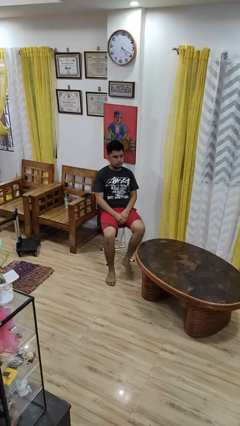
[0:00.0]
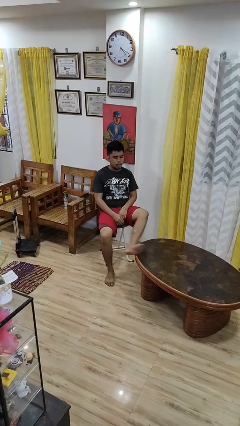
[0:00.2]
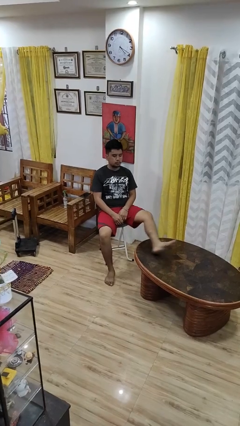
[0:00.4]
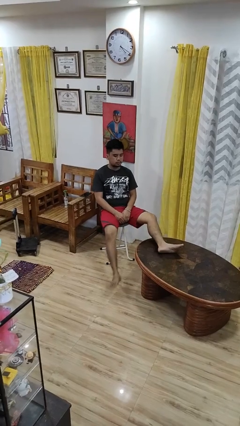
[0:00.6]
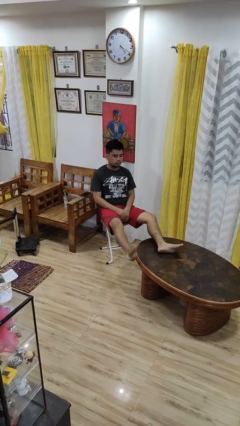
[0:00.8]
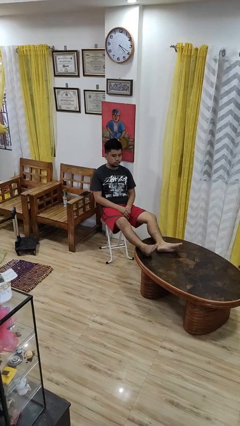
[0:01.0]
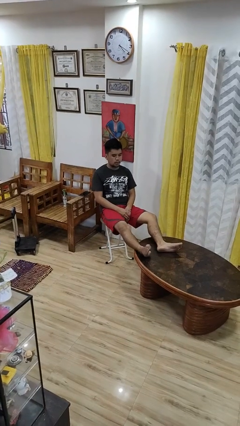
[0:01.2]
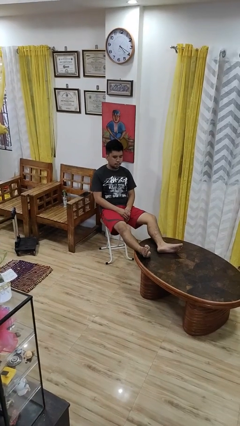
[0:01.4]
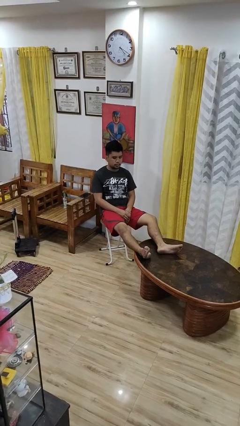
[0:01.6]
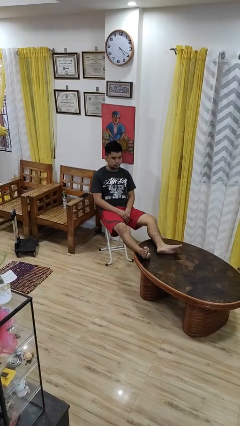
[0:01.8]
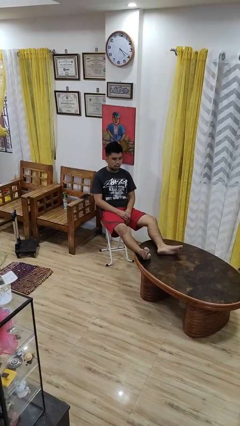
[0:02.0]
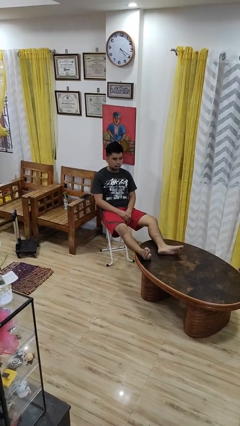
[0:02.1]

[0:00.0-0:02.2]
person puts feet up

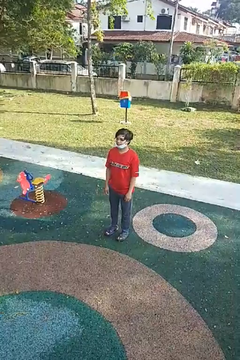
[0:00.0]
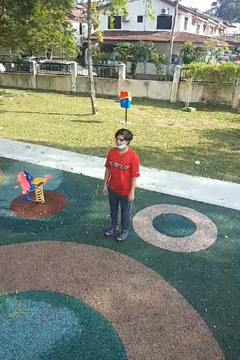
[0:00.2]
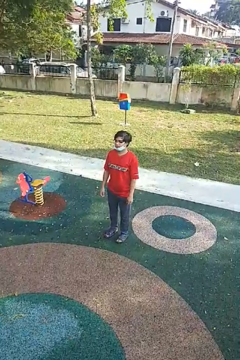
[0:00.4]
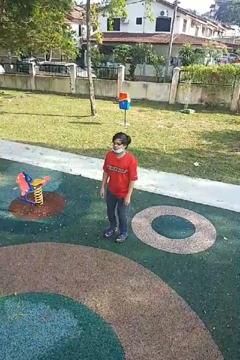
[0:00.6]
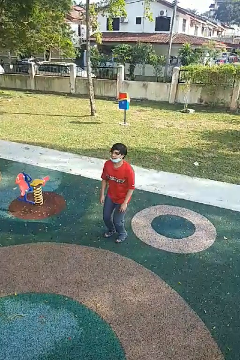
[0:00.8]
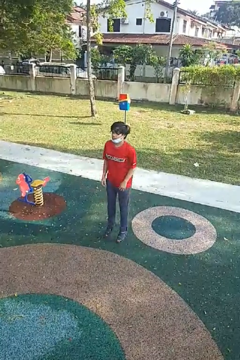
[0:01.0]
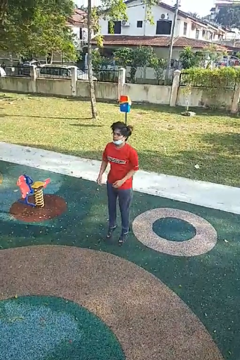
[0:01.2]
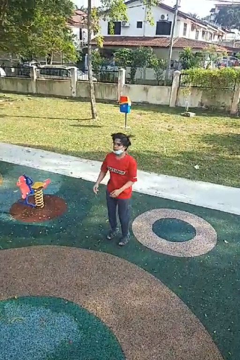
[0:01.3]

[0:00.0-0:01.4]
person jumps

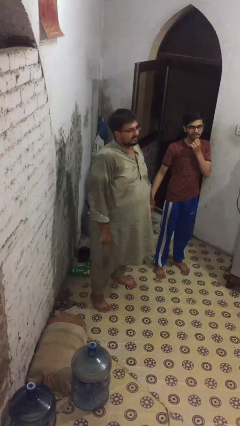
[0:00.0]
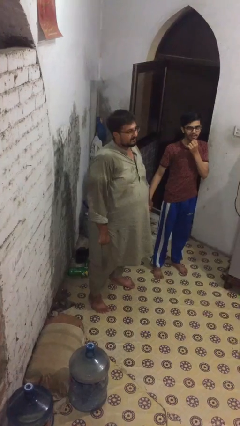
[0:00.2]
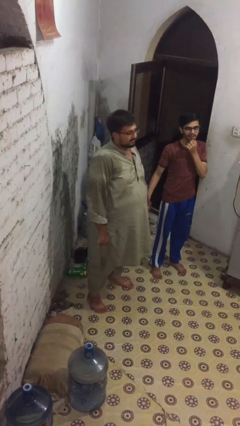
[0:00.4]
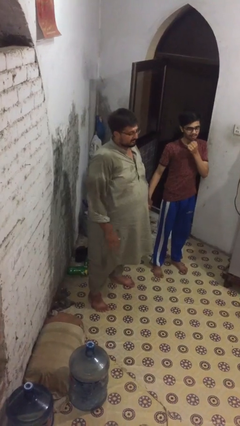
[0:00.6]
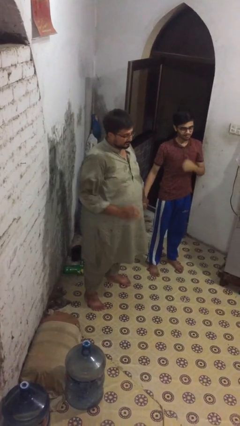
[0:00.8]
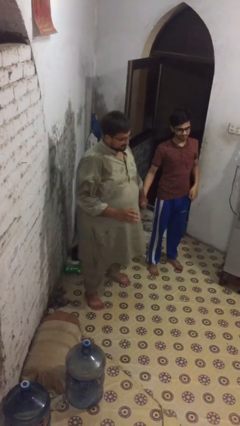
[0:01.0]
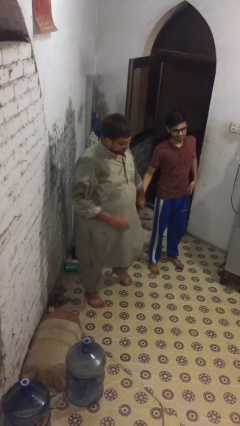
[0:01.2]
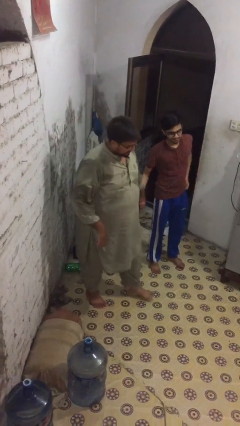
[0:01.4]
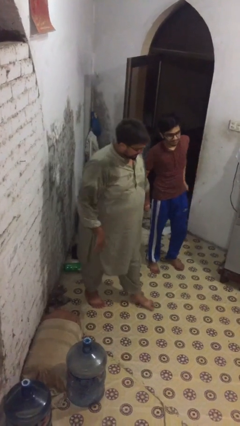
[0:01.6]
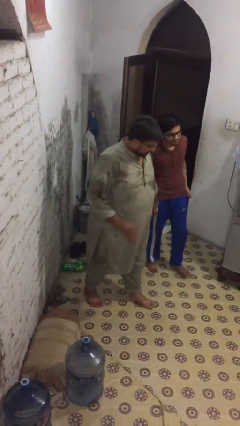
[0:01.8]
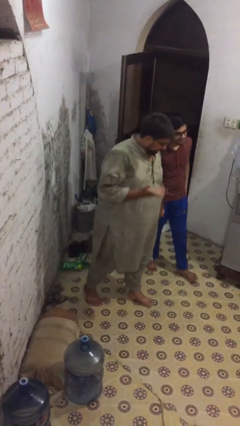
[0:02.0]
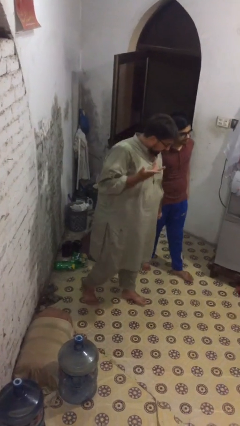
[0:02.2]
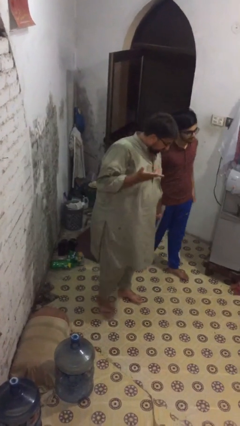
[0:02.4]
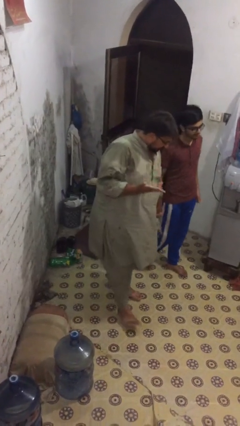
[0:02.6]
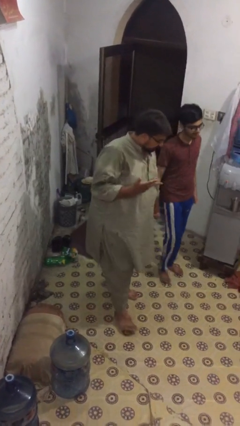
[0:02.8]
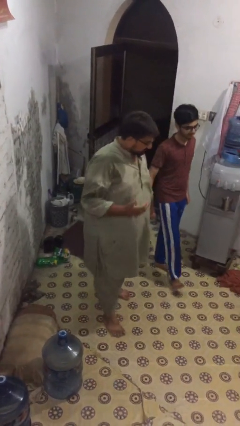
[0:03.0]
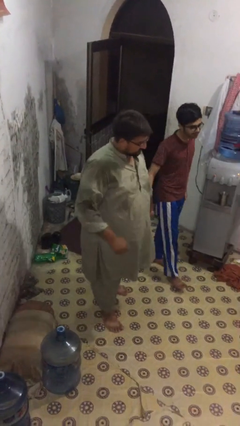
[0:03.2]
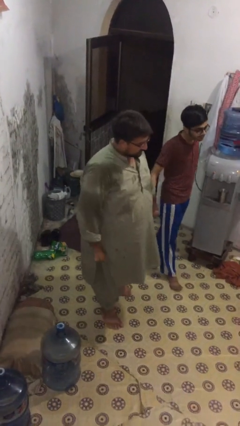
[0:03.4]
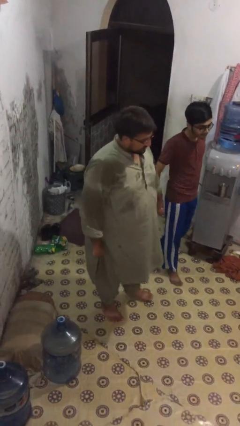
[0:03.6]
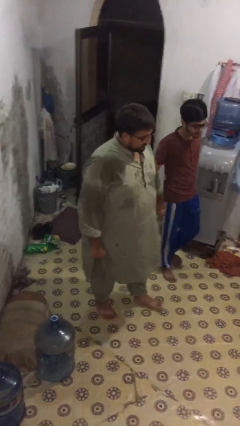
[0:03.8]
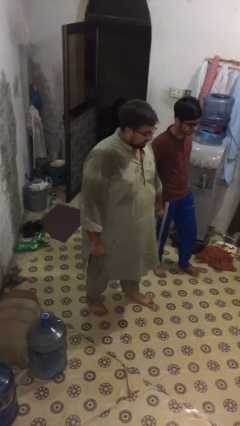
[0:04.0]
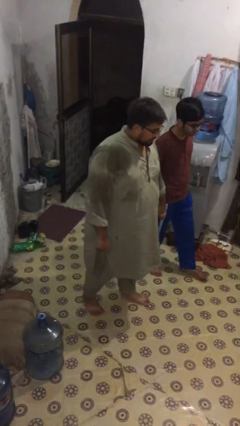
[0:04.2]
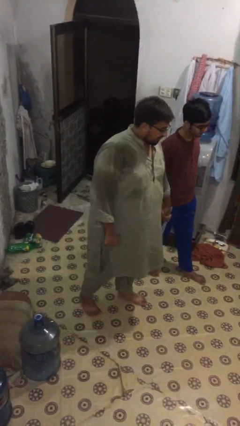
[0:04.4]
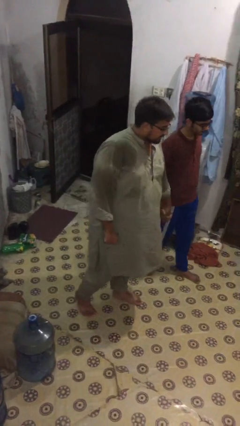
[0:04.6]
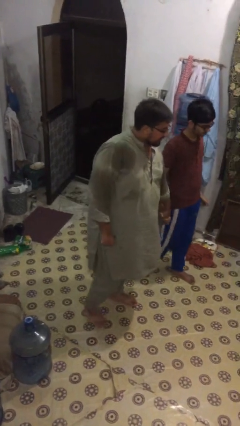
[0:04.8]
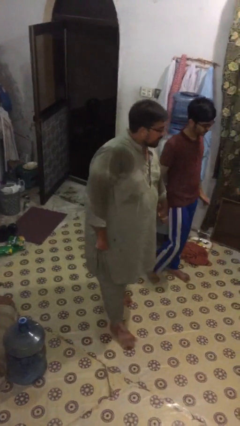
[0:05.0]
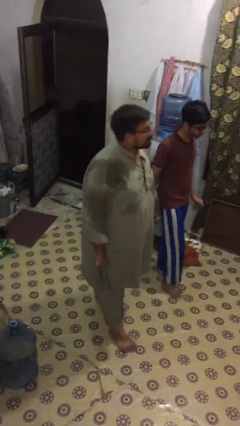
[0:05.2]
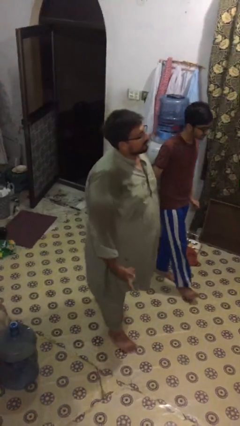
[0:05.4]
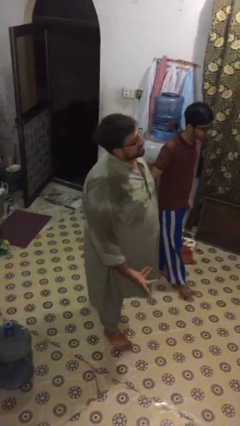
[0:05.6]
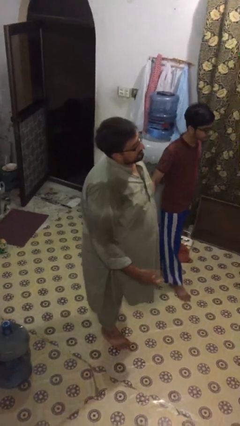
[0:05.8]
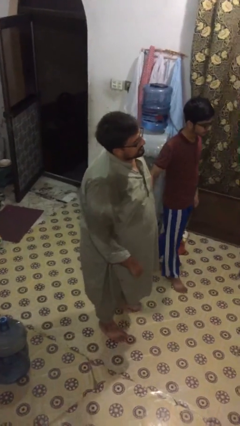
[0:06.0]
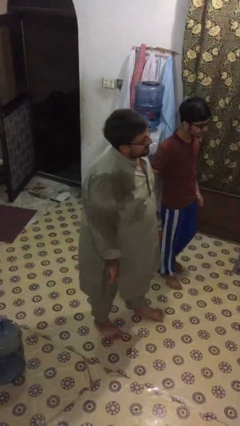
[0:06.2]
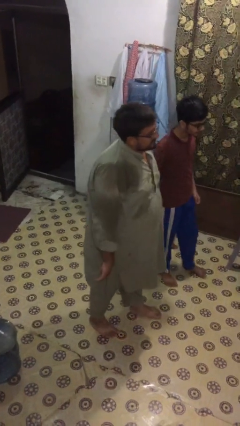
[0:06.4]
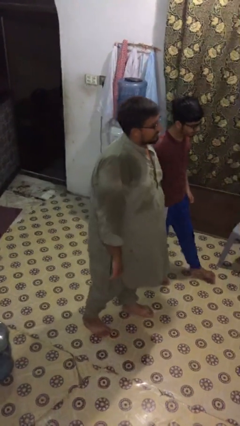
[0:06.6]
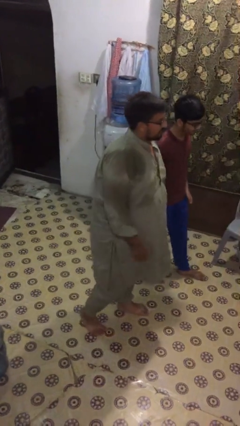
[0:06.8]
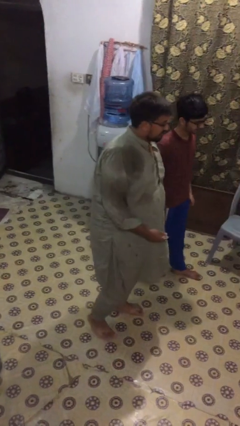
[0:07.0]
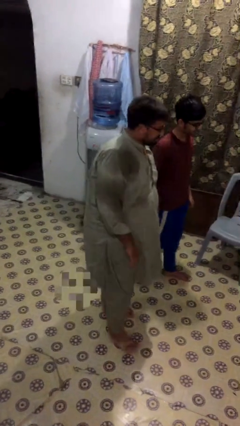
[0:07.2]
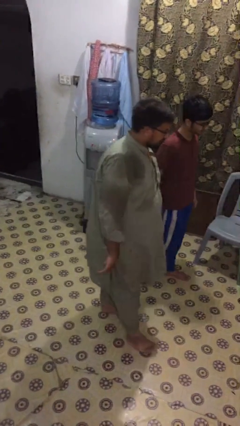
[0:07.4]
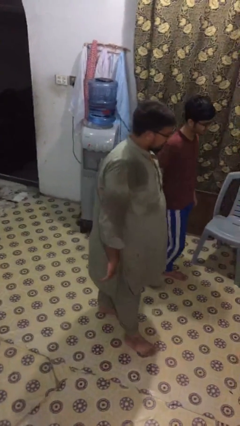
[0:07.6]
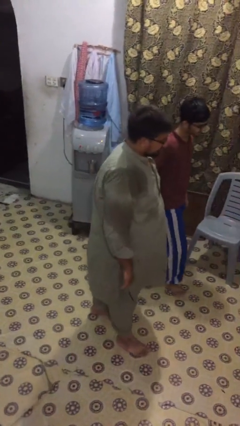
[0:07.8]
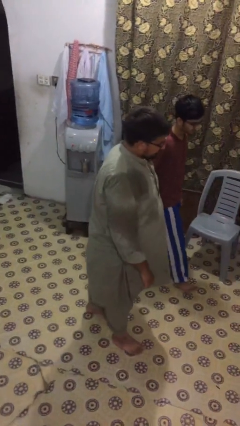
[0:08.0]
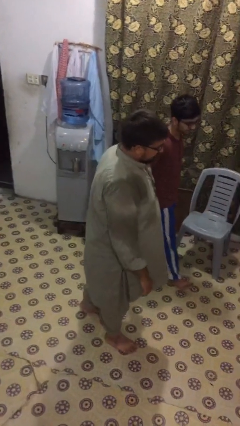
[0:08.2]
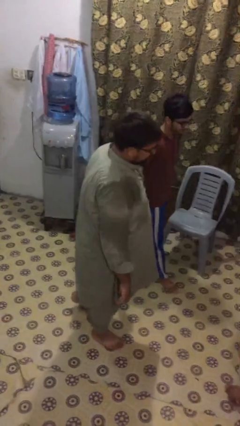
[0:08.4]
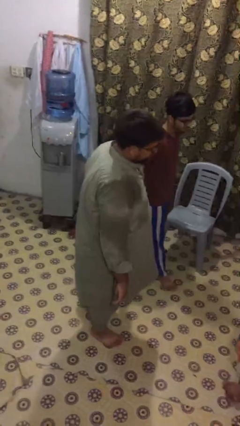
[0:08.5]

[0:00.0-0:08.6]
person holds hand

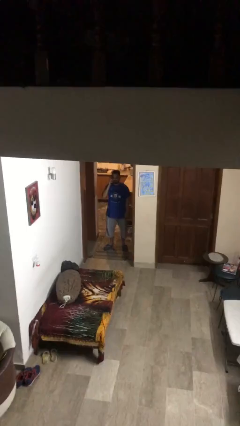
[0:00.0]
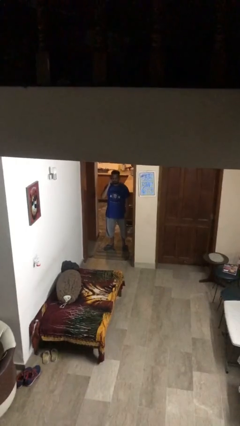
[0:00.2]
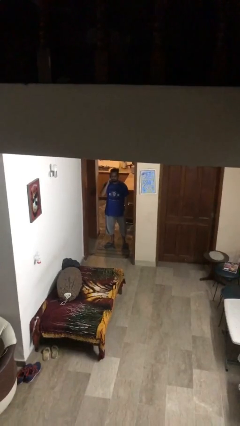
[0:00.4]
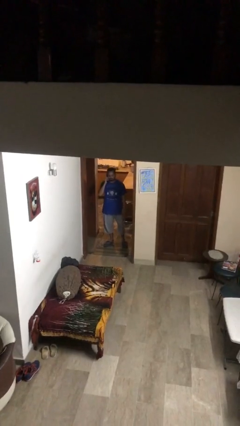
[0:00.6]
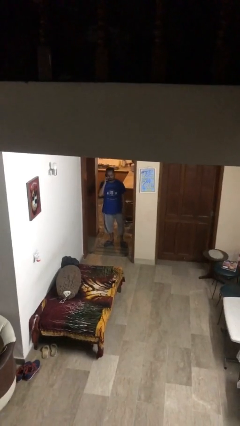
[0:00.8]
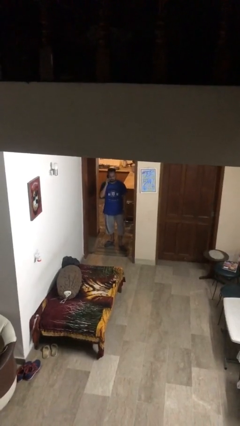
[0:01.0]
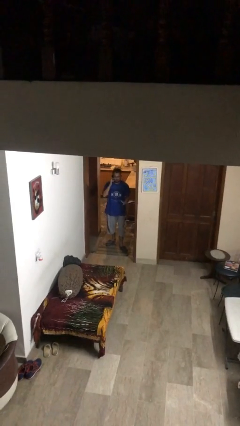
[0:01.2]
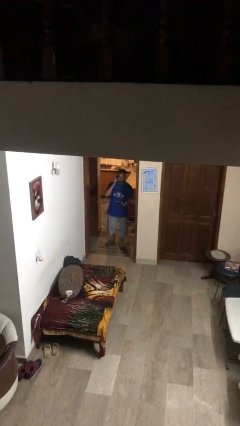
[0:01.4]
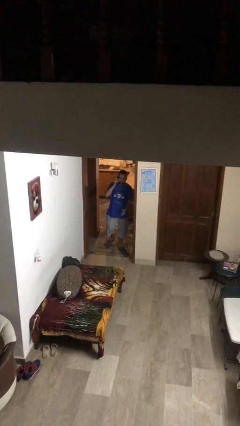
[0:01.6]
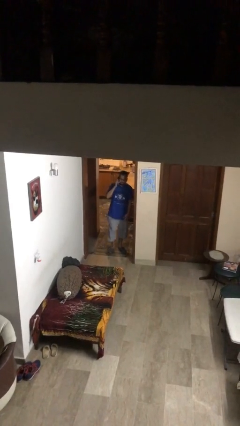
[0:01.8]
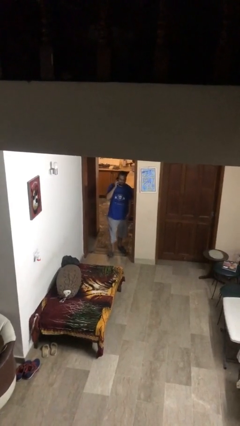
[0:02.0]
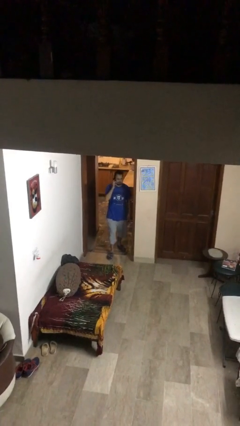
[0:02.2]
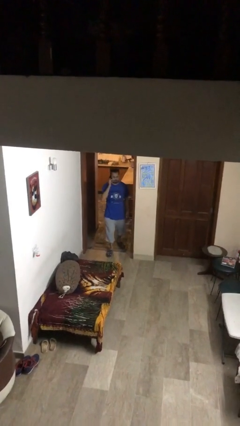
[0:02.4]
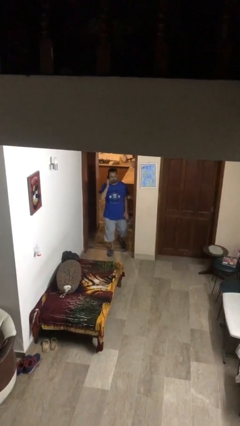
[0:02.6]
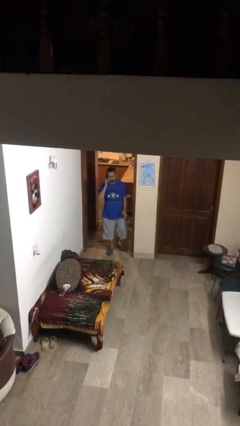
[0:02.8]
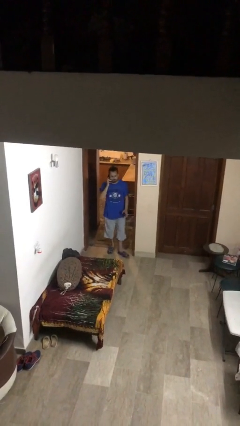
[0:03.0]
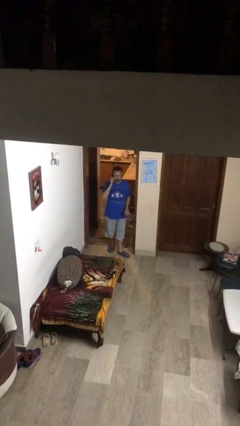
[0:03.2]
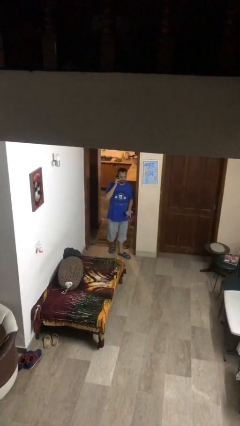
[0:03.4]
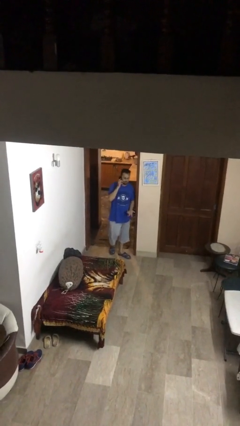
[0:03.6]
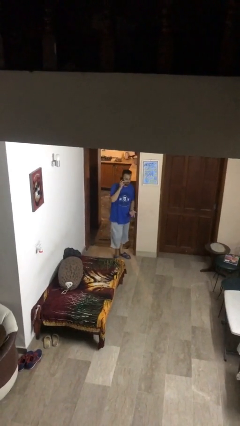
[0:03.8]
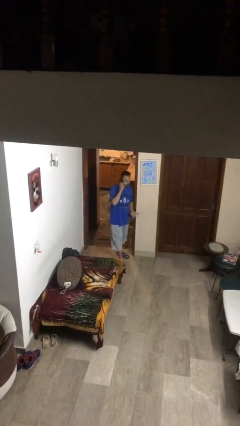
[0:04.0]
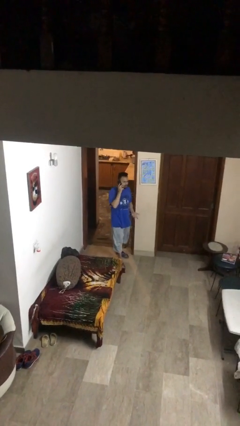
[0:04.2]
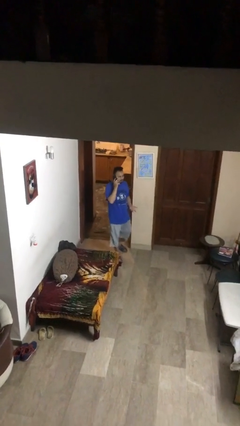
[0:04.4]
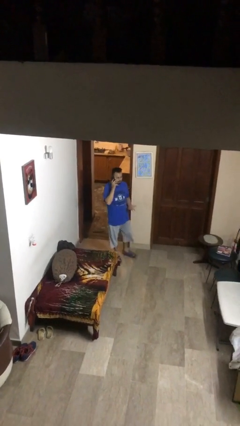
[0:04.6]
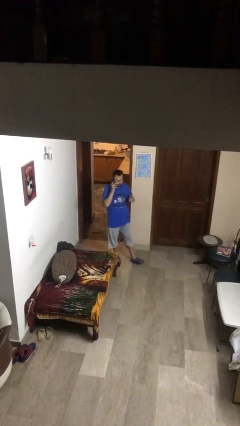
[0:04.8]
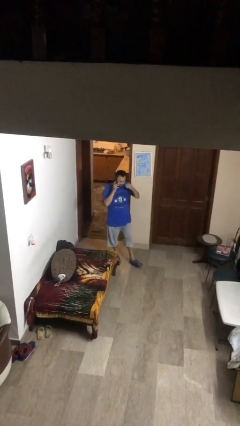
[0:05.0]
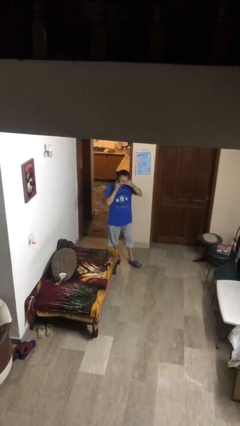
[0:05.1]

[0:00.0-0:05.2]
person enters scene through structure

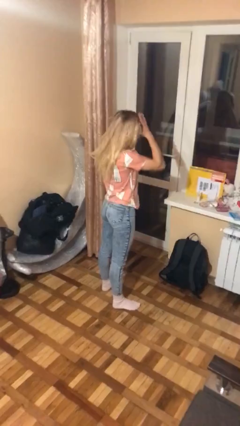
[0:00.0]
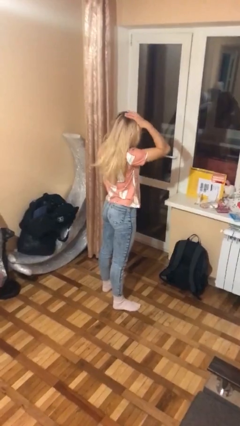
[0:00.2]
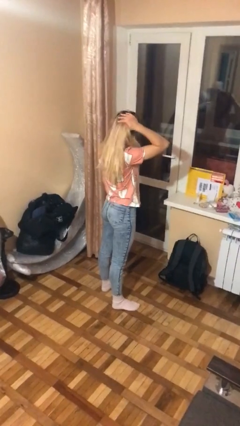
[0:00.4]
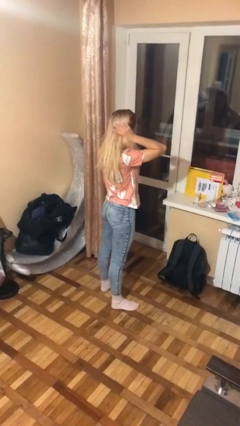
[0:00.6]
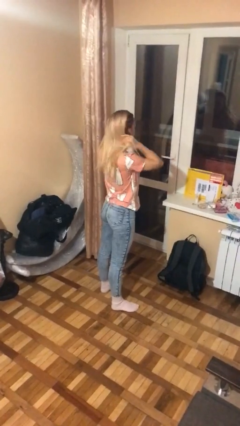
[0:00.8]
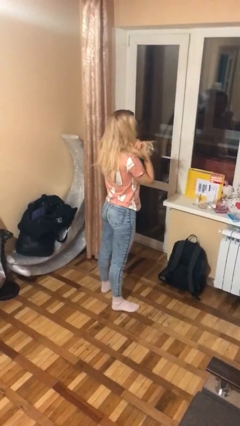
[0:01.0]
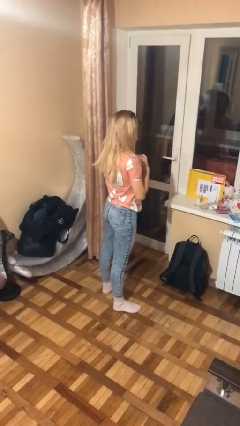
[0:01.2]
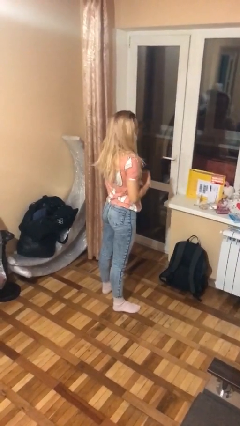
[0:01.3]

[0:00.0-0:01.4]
person strokes hair
